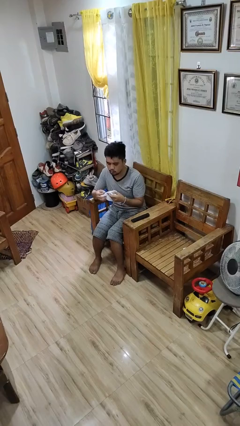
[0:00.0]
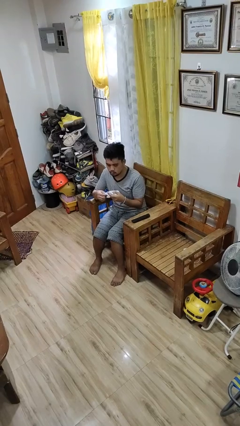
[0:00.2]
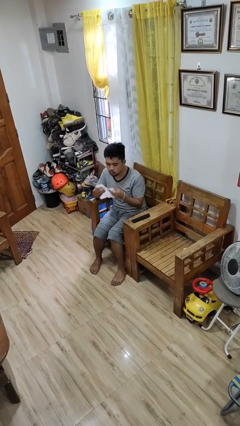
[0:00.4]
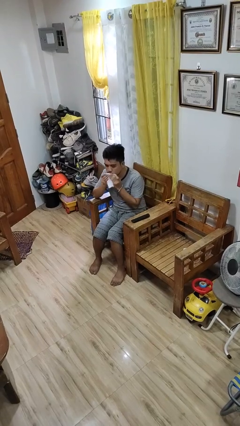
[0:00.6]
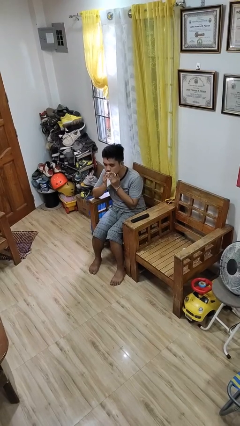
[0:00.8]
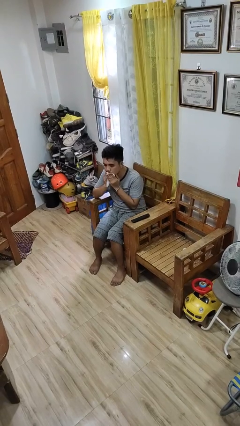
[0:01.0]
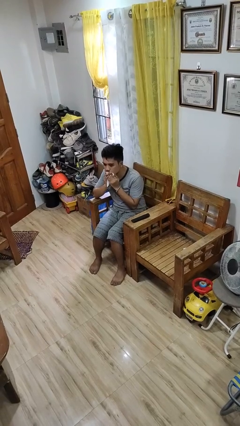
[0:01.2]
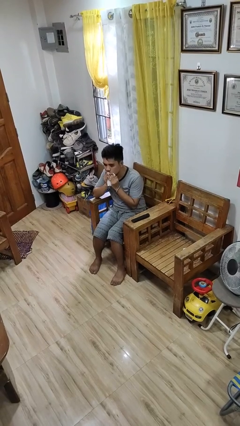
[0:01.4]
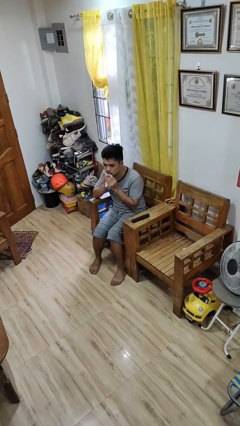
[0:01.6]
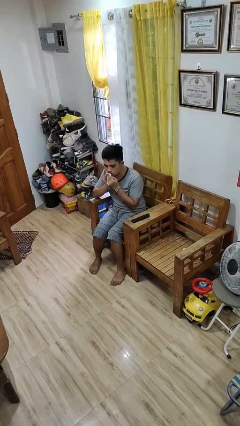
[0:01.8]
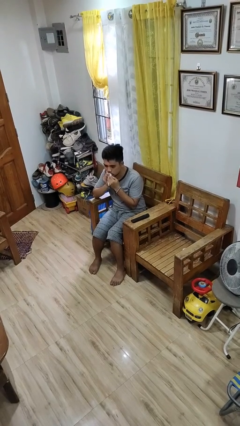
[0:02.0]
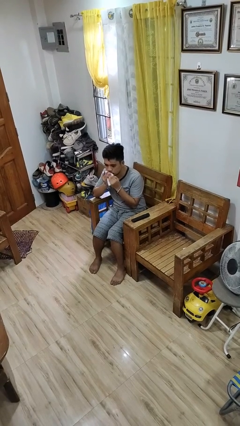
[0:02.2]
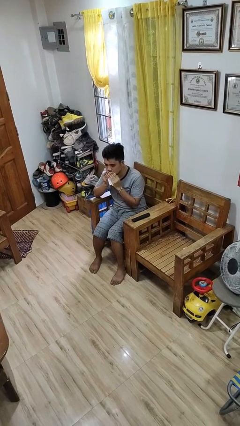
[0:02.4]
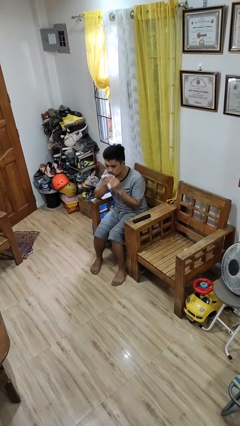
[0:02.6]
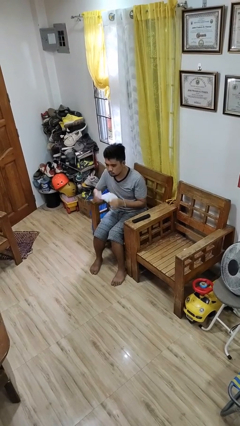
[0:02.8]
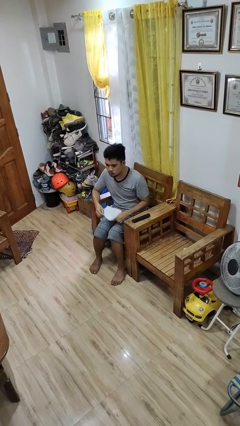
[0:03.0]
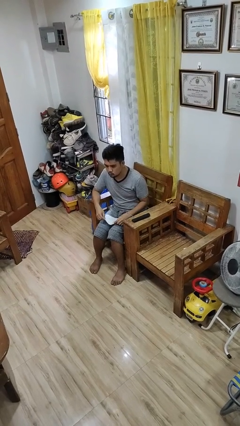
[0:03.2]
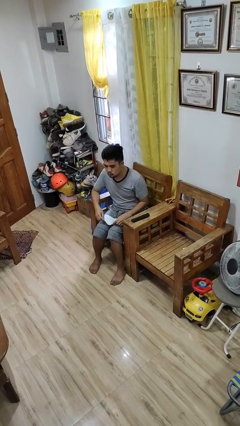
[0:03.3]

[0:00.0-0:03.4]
person wipes mouth with napkin

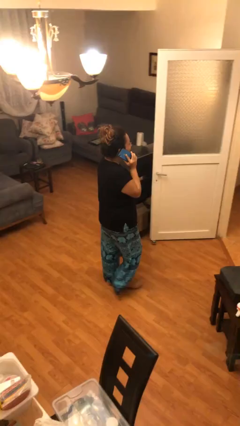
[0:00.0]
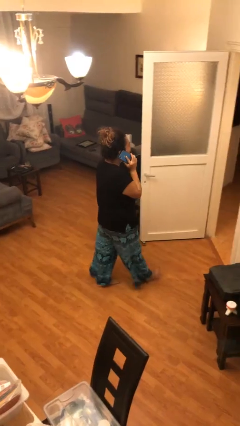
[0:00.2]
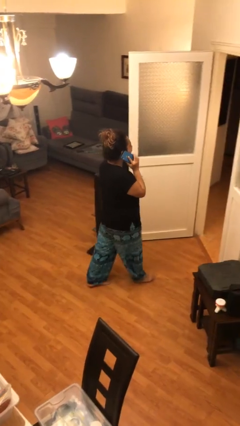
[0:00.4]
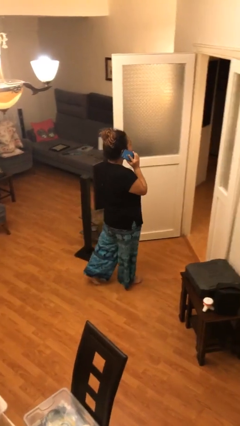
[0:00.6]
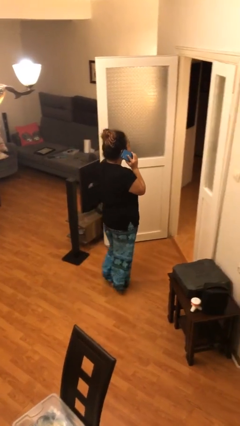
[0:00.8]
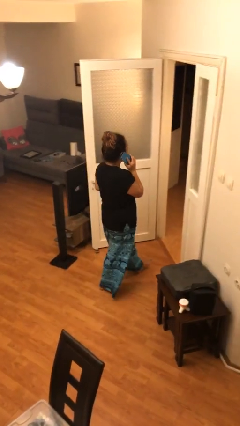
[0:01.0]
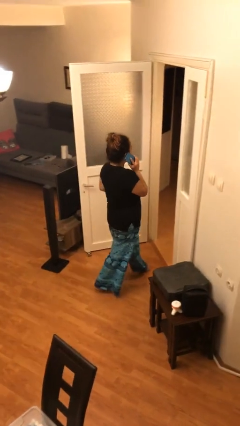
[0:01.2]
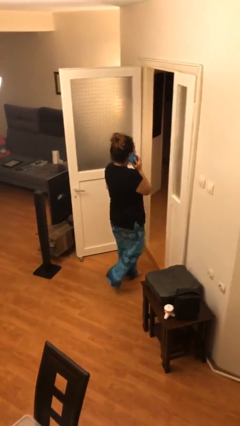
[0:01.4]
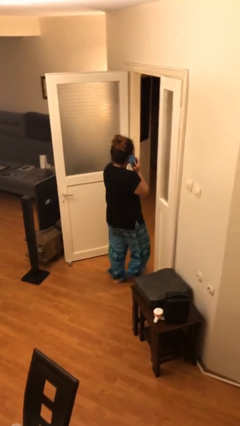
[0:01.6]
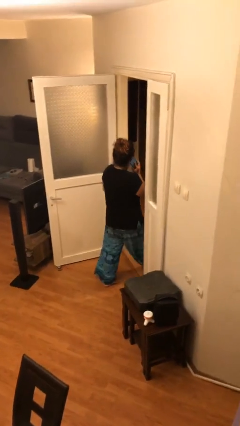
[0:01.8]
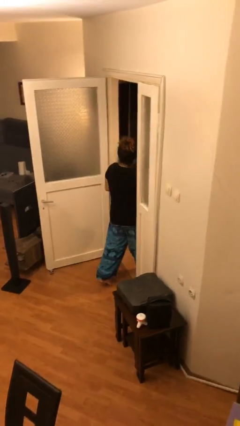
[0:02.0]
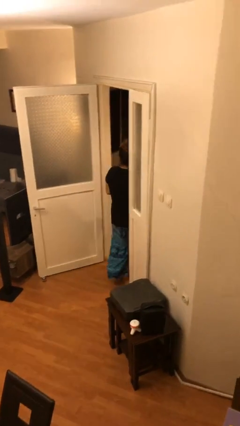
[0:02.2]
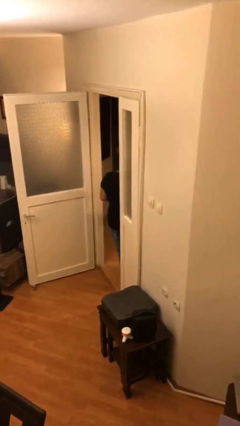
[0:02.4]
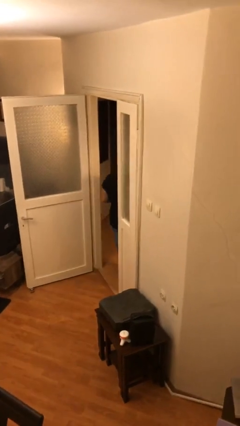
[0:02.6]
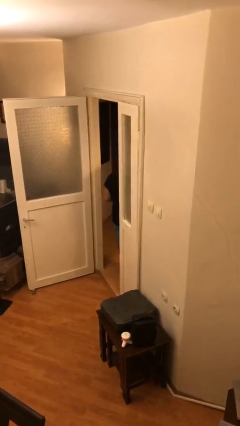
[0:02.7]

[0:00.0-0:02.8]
person exits scene through structure

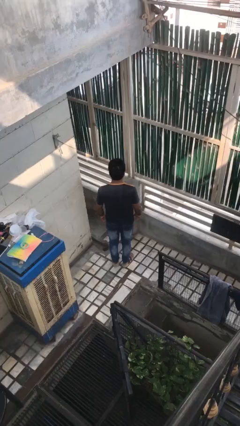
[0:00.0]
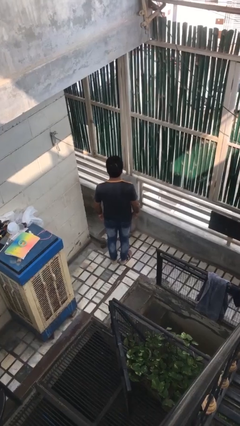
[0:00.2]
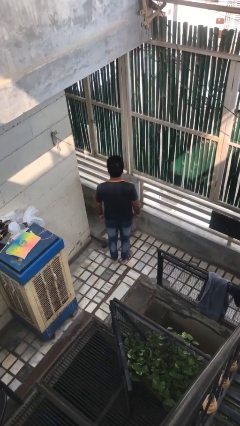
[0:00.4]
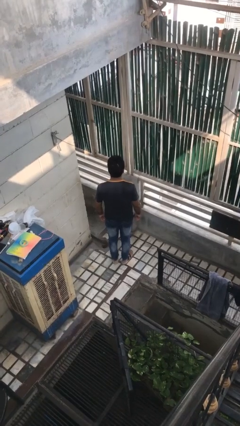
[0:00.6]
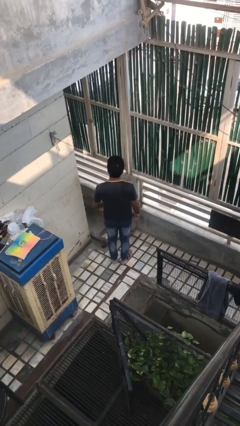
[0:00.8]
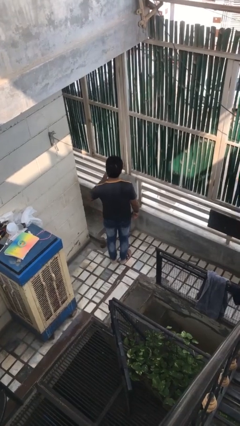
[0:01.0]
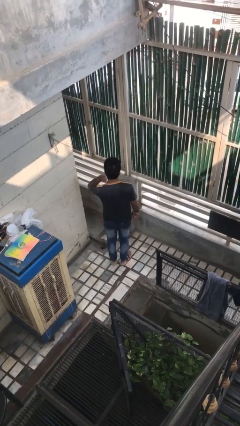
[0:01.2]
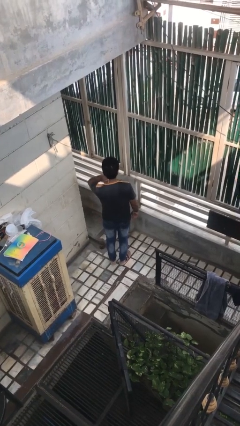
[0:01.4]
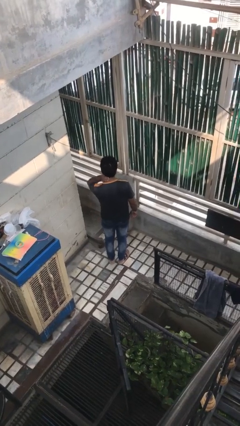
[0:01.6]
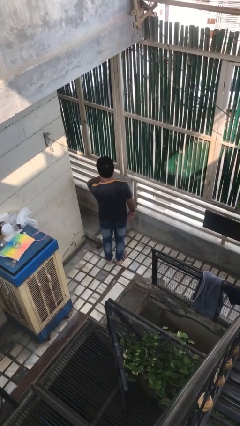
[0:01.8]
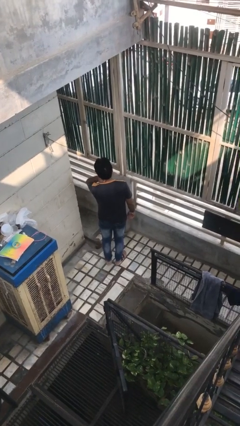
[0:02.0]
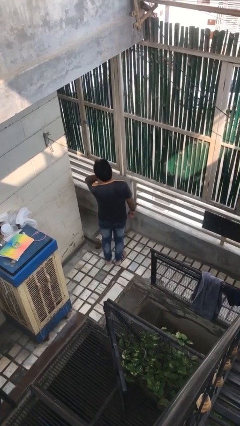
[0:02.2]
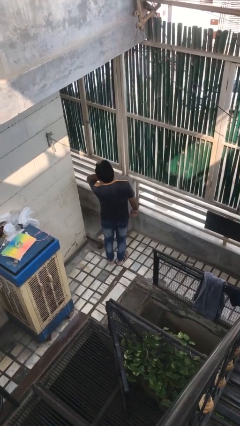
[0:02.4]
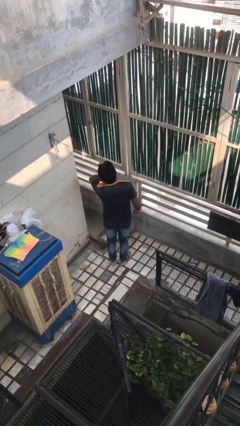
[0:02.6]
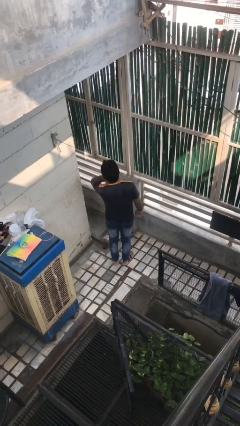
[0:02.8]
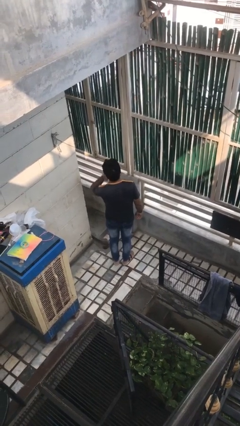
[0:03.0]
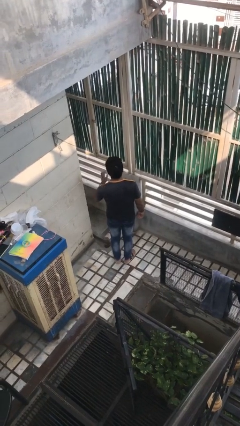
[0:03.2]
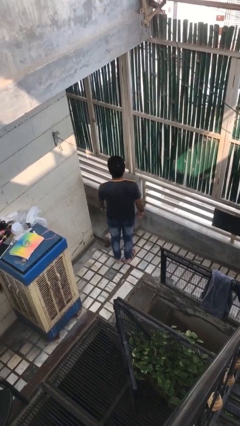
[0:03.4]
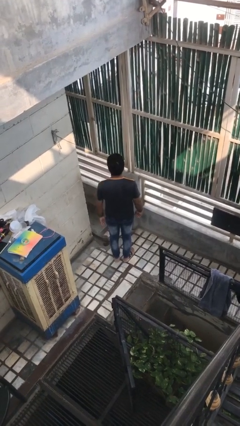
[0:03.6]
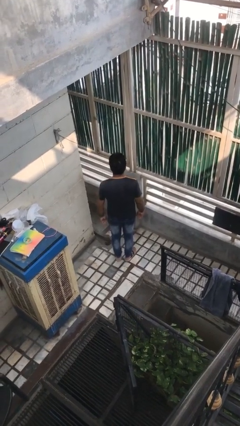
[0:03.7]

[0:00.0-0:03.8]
person rubs neck

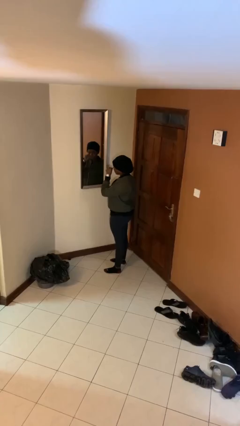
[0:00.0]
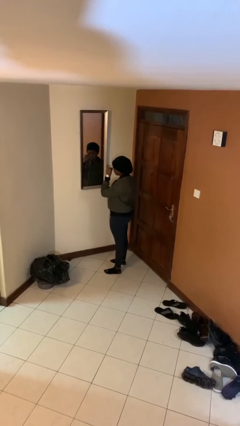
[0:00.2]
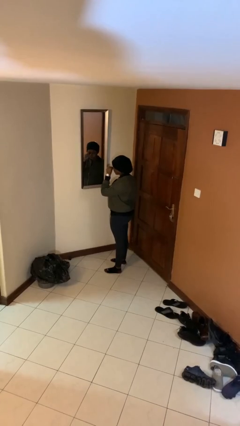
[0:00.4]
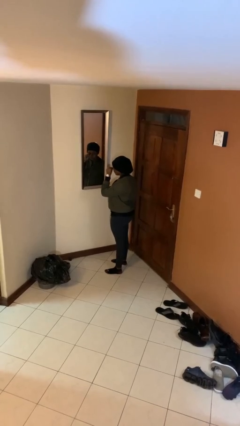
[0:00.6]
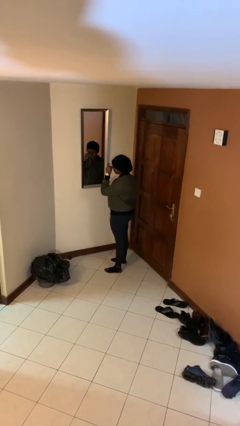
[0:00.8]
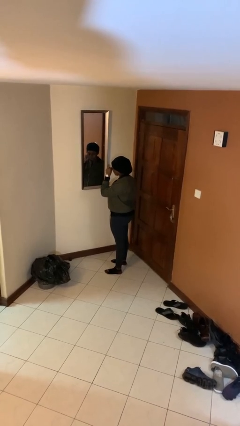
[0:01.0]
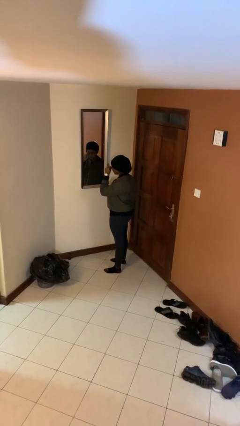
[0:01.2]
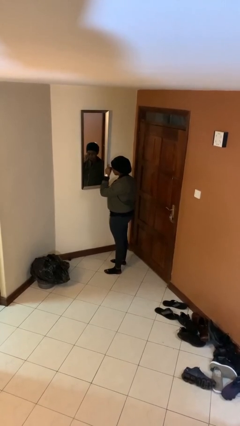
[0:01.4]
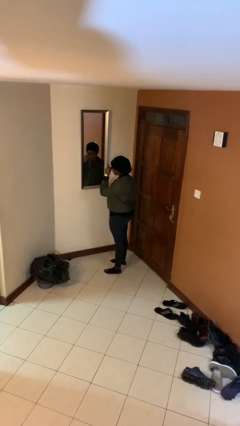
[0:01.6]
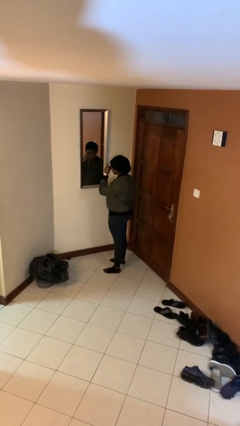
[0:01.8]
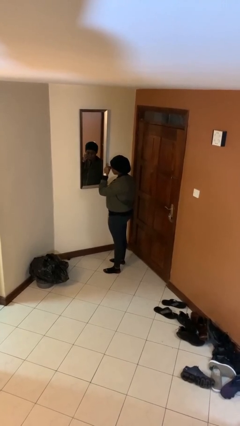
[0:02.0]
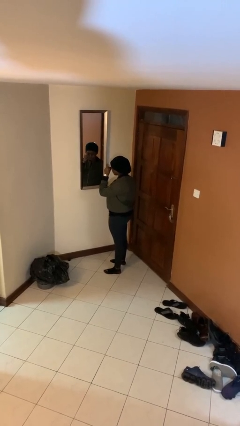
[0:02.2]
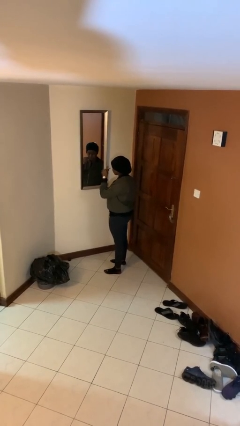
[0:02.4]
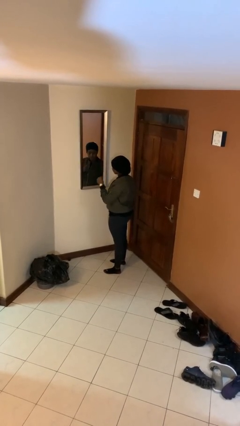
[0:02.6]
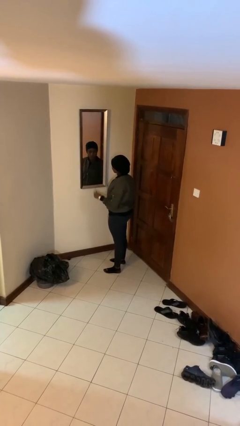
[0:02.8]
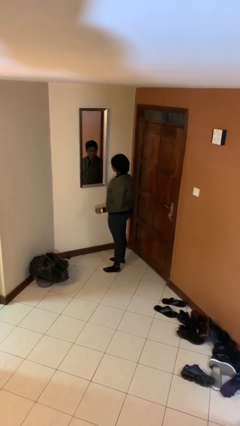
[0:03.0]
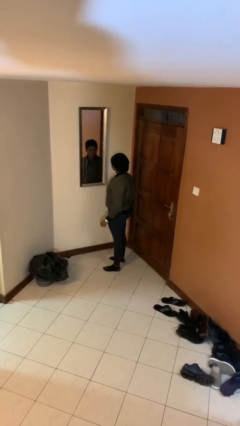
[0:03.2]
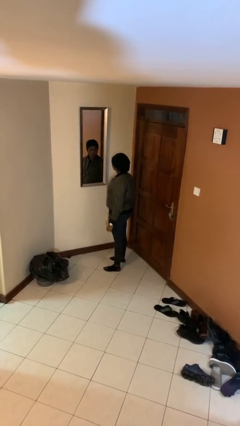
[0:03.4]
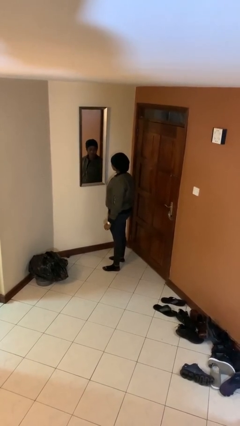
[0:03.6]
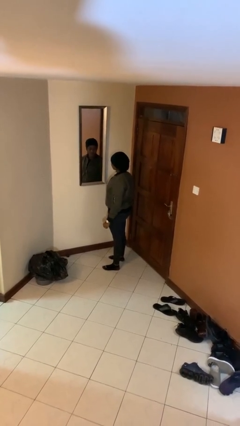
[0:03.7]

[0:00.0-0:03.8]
person applies eye makeup

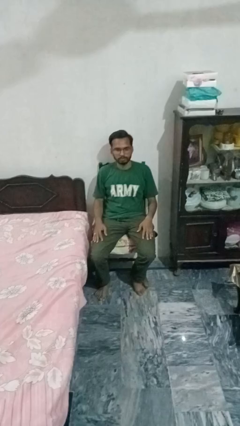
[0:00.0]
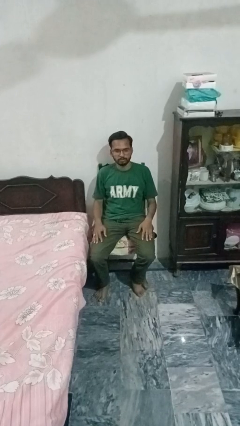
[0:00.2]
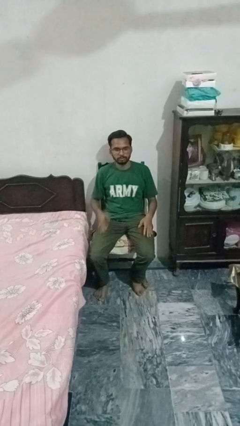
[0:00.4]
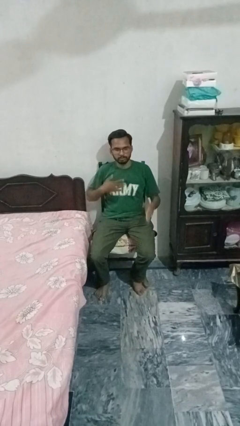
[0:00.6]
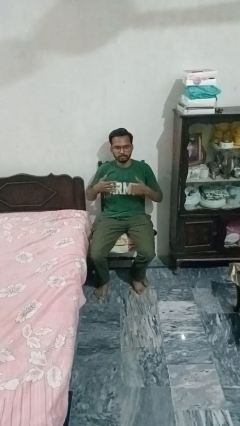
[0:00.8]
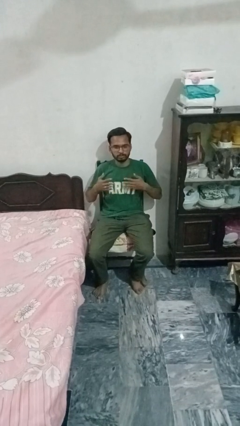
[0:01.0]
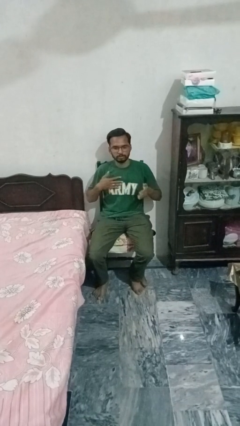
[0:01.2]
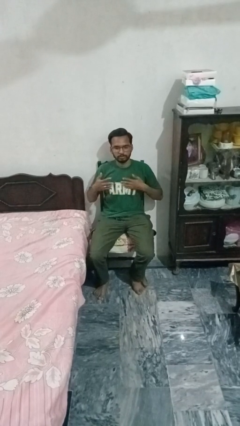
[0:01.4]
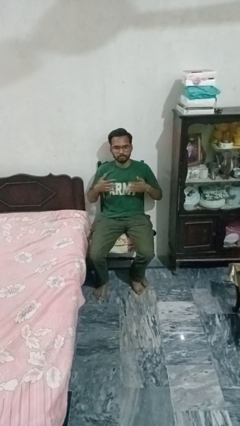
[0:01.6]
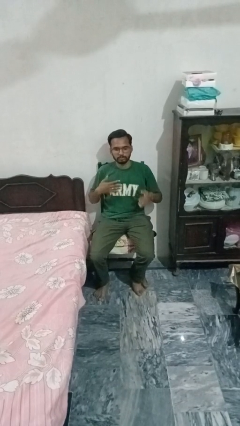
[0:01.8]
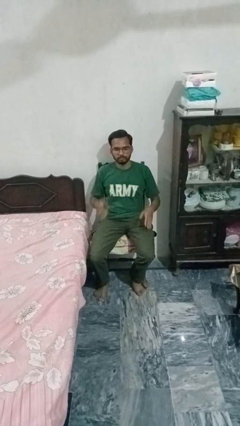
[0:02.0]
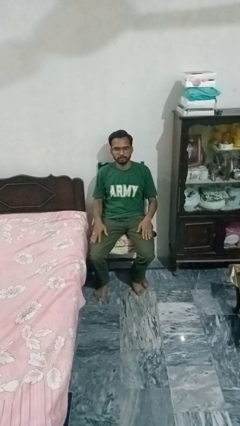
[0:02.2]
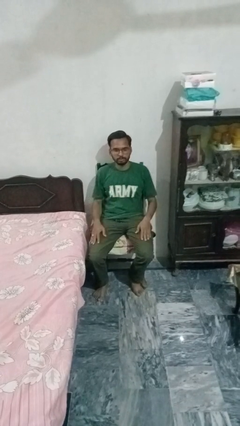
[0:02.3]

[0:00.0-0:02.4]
person drums on chest

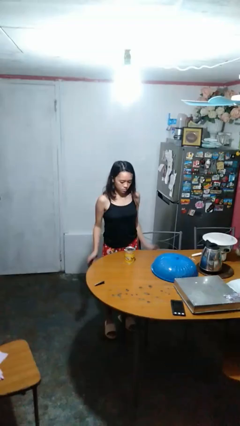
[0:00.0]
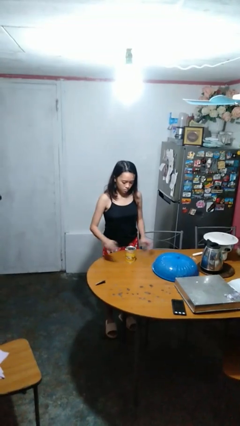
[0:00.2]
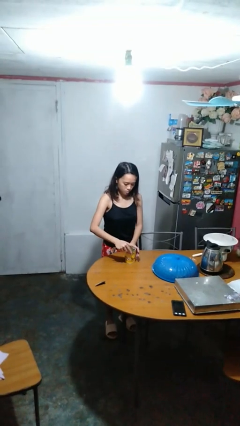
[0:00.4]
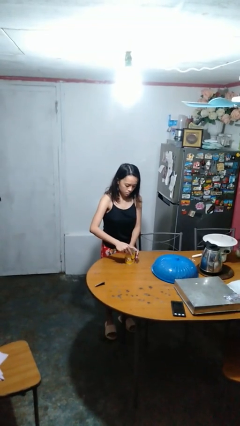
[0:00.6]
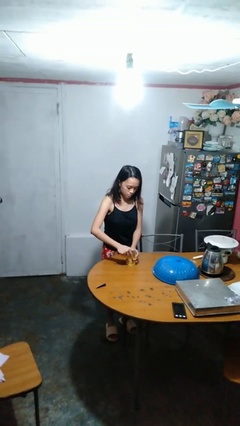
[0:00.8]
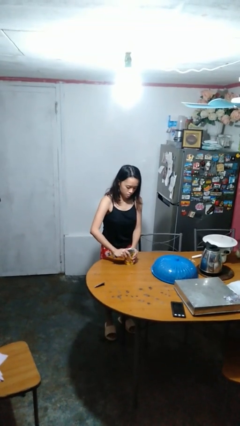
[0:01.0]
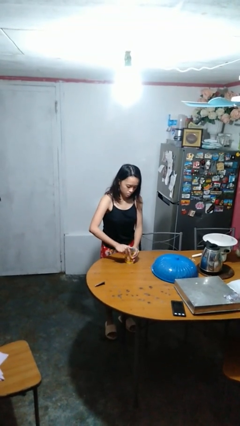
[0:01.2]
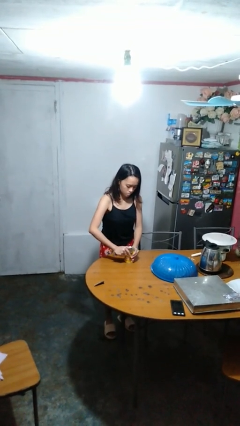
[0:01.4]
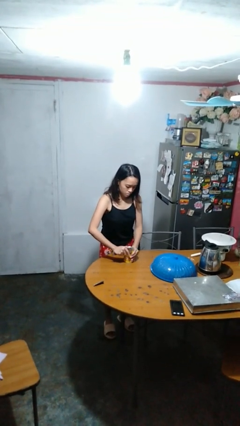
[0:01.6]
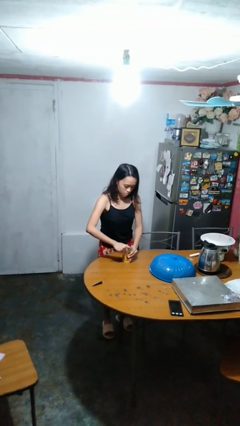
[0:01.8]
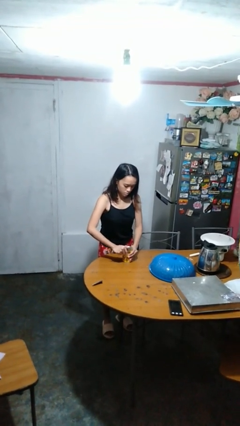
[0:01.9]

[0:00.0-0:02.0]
person opens can with can opener
